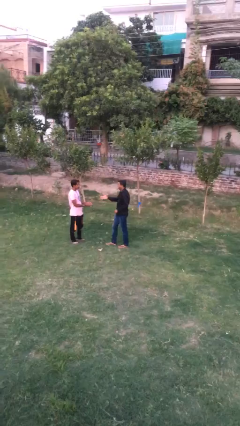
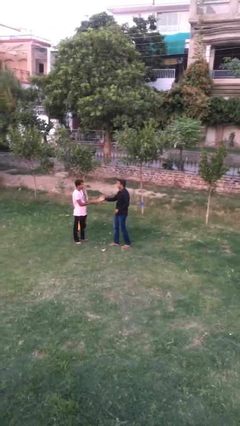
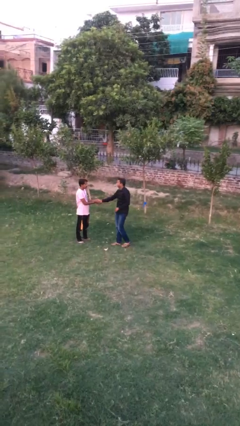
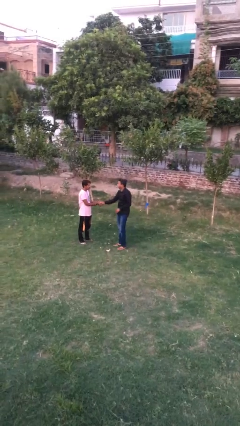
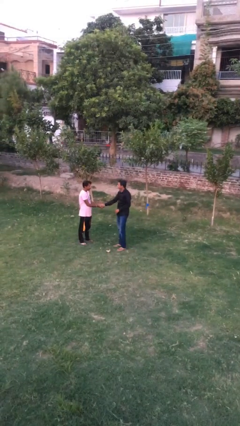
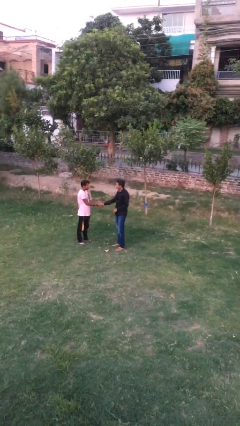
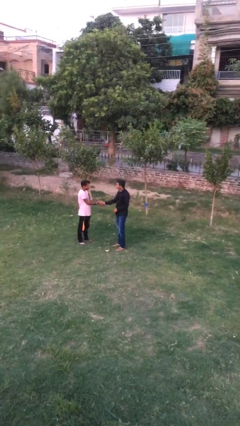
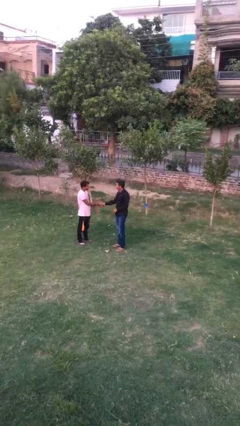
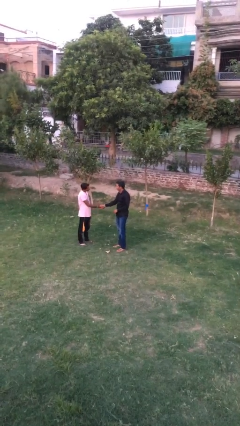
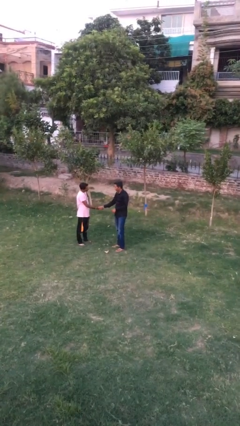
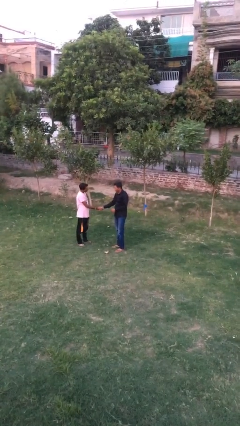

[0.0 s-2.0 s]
person shakes hand

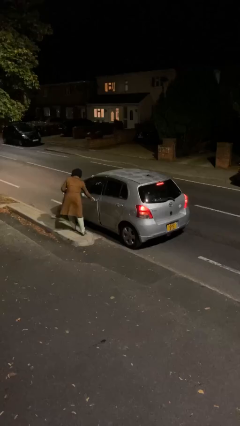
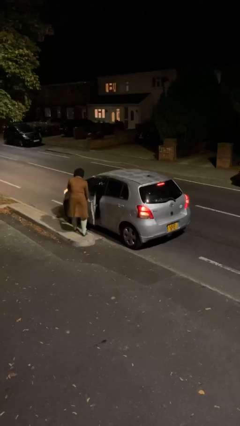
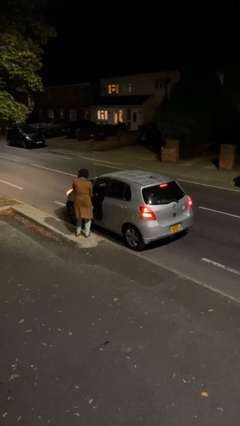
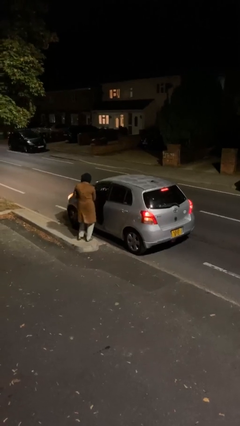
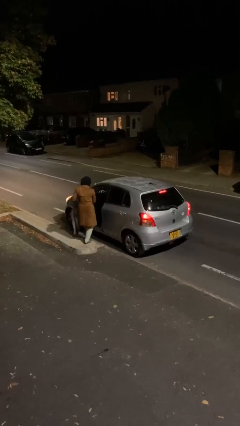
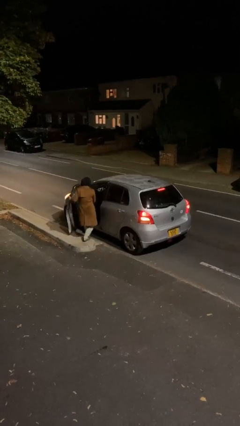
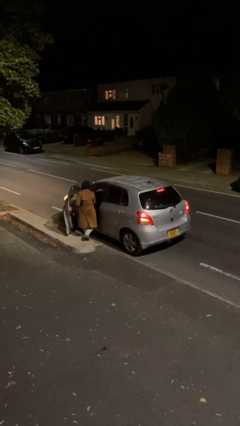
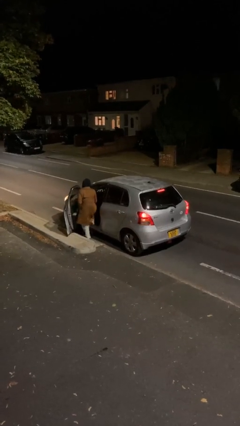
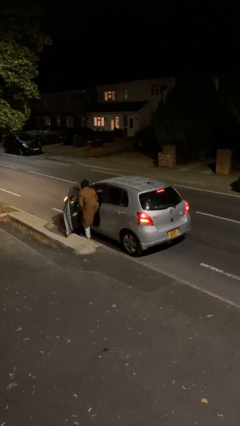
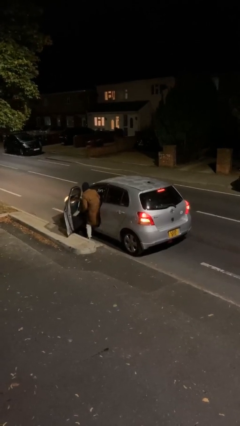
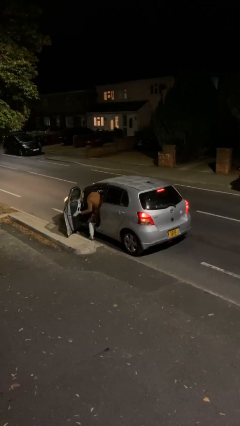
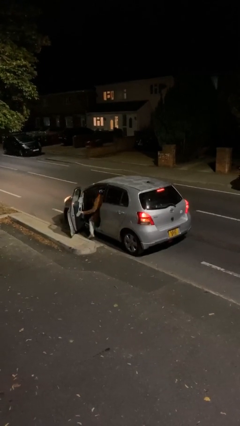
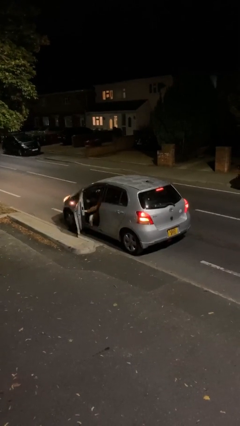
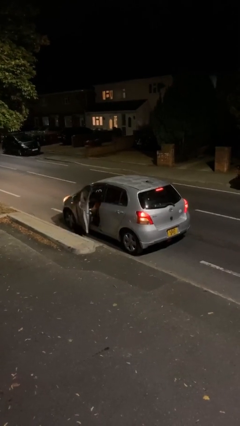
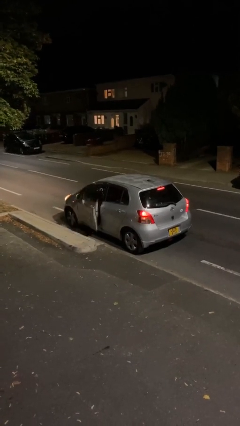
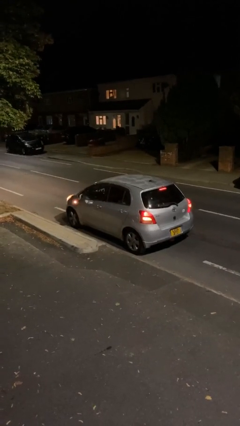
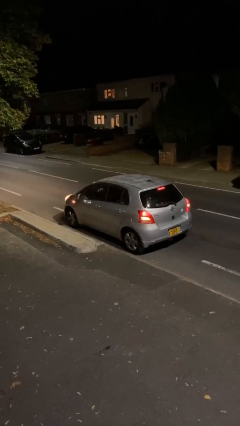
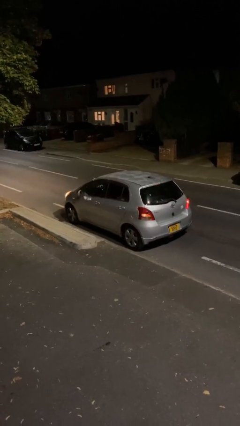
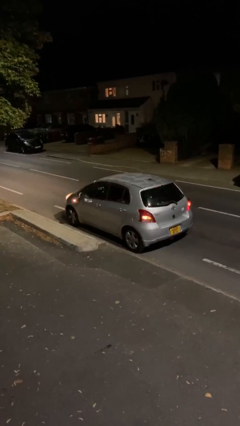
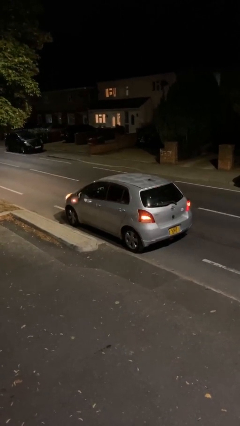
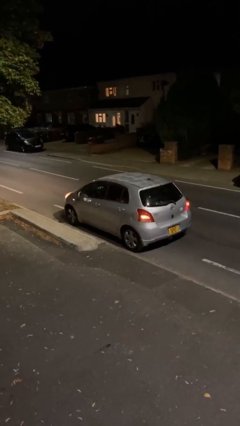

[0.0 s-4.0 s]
car picks up person

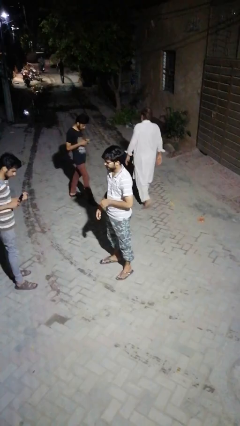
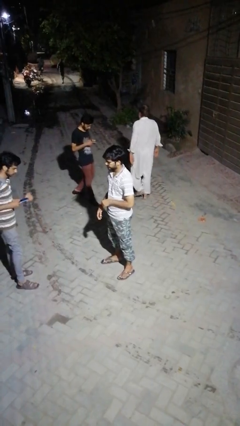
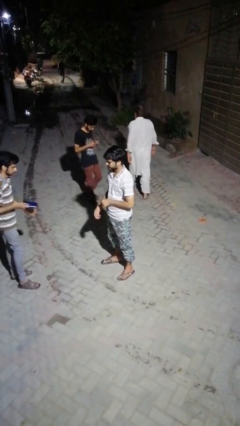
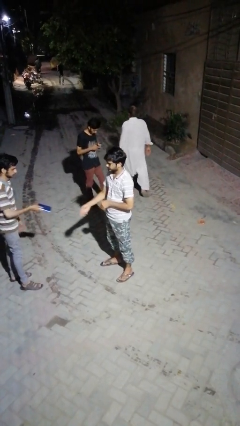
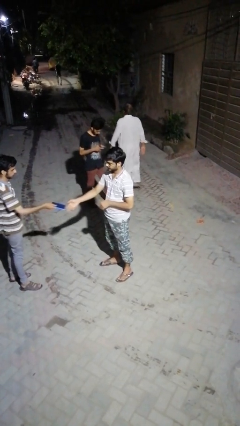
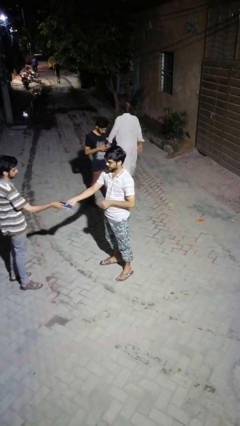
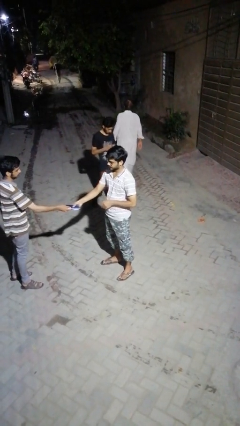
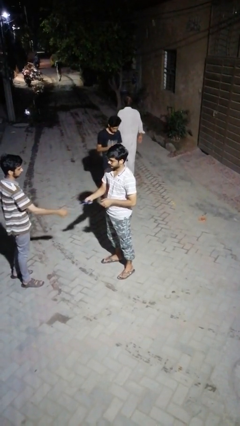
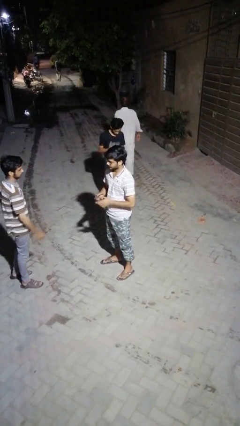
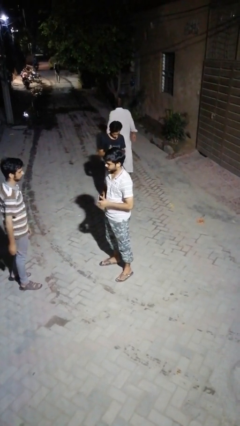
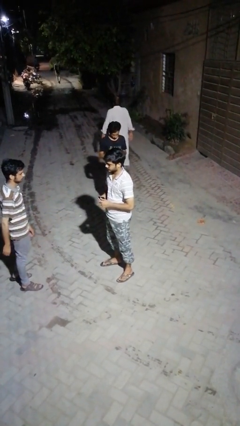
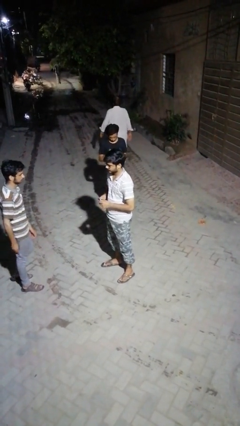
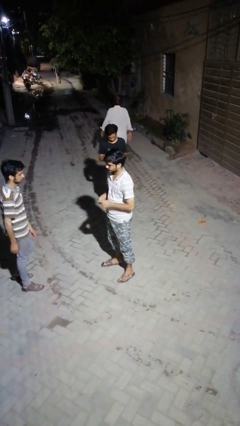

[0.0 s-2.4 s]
person transfers object to person

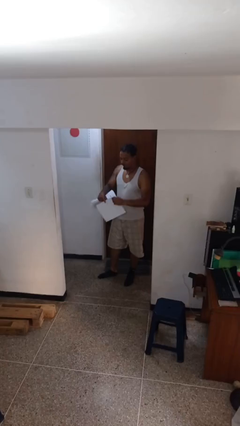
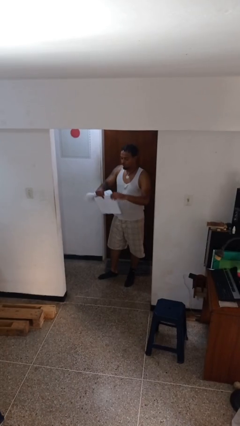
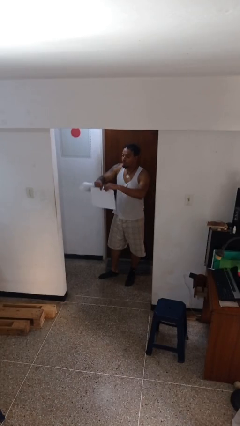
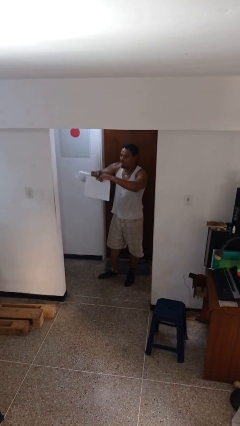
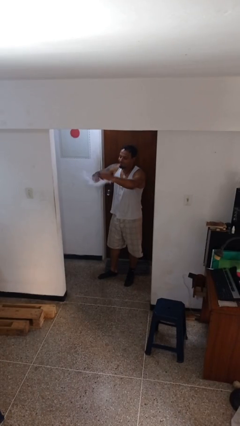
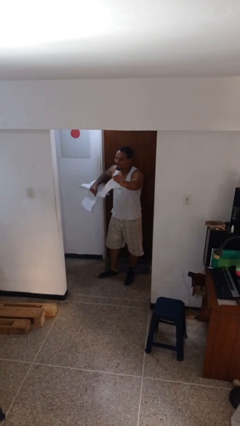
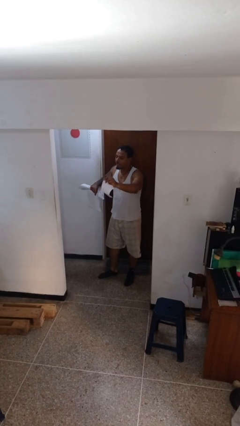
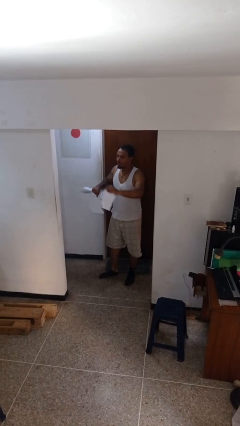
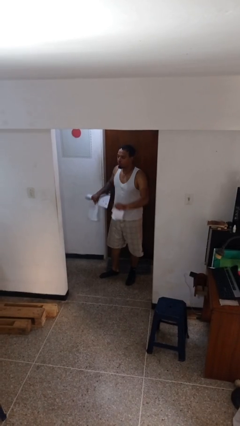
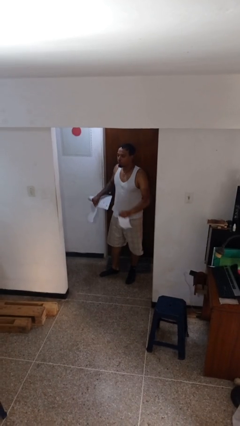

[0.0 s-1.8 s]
person tears paper

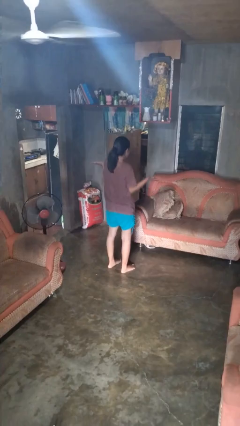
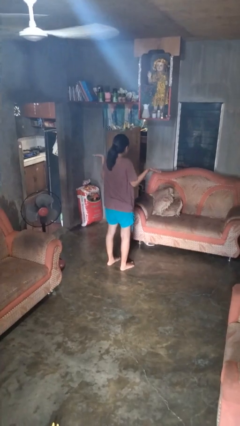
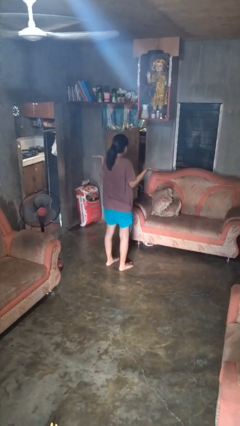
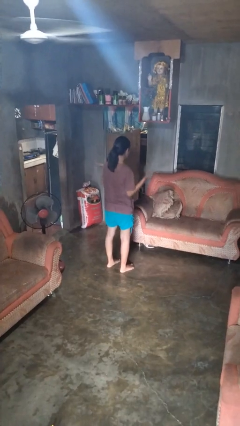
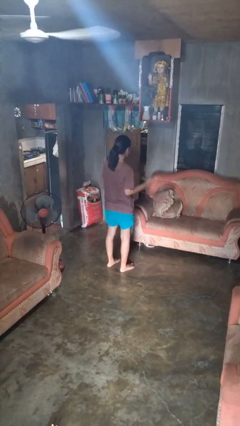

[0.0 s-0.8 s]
person shrugs

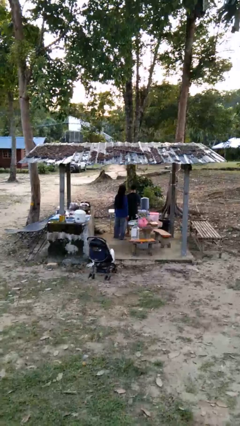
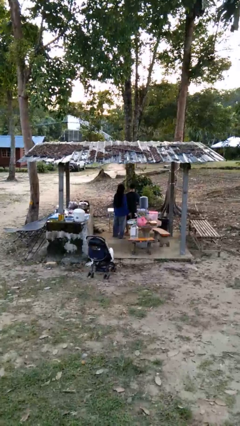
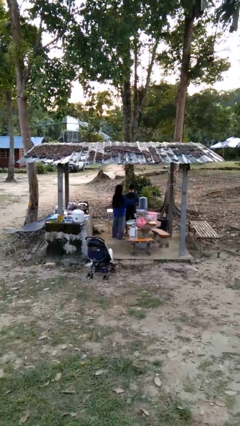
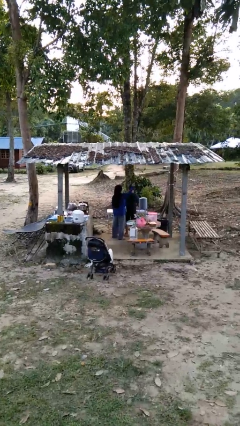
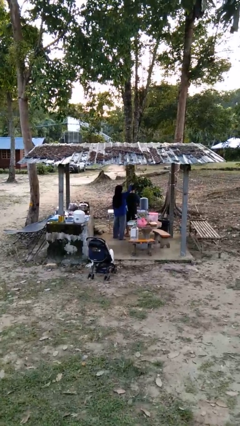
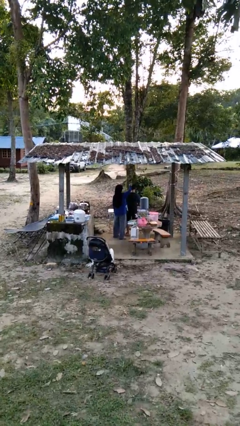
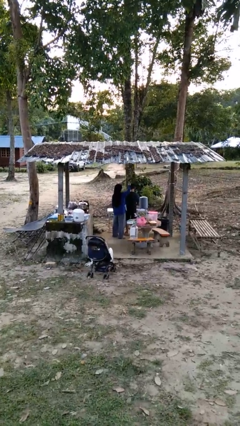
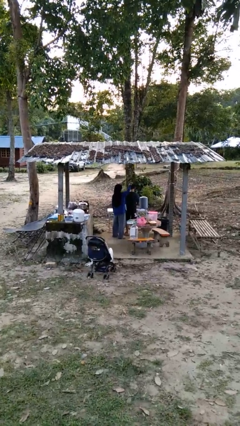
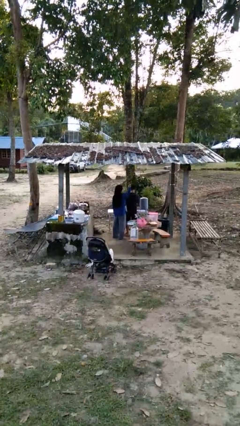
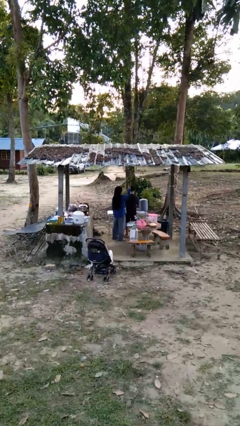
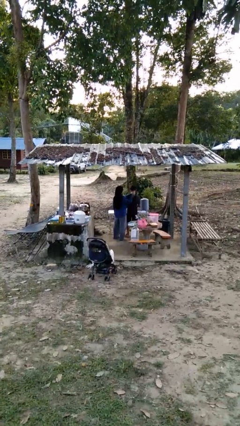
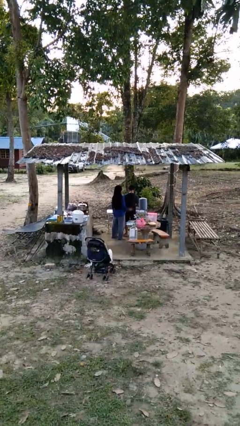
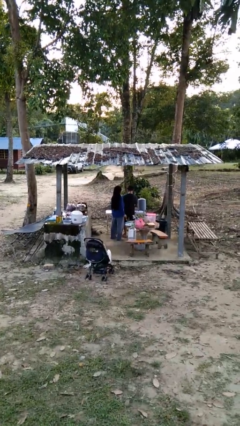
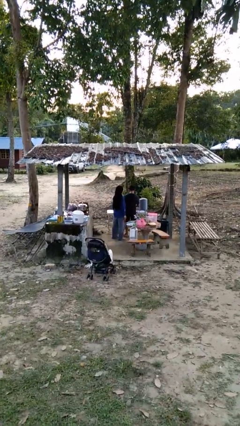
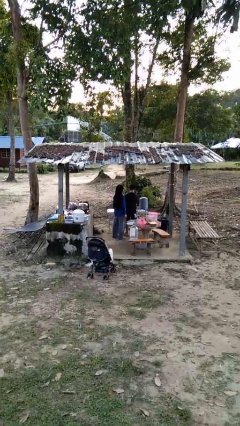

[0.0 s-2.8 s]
person brushes hair of person

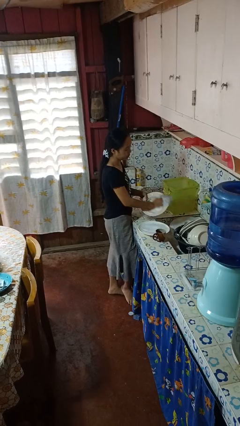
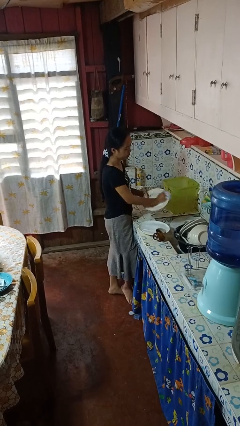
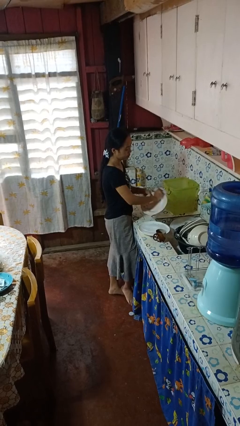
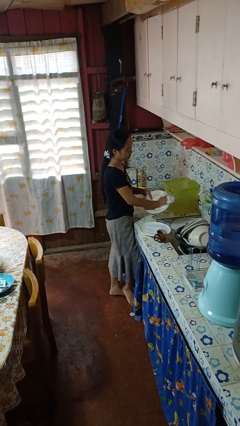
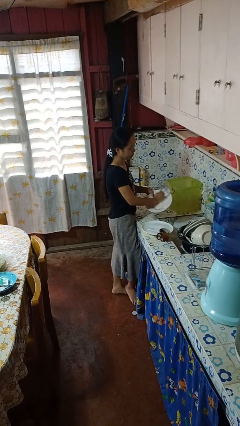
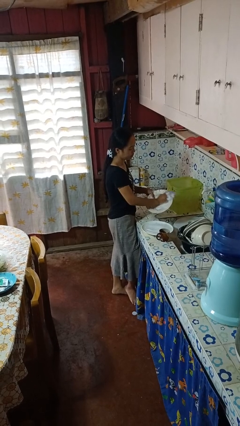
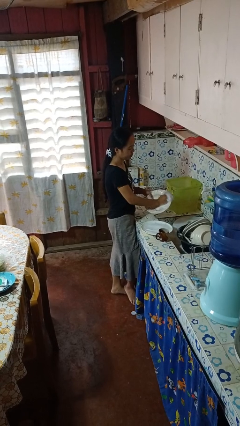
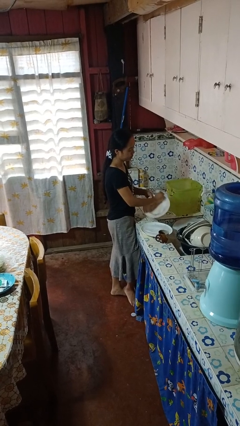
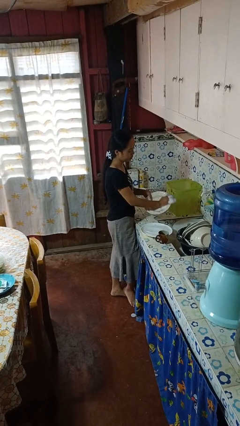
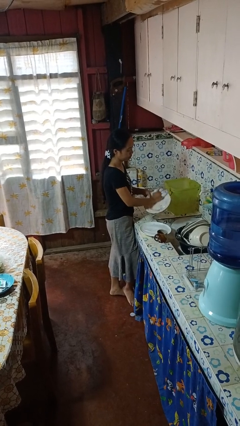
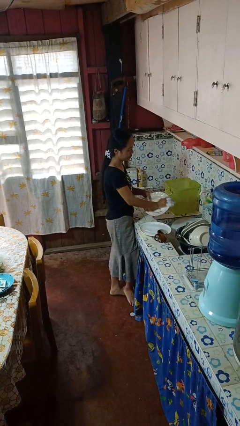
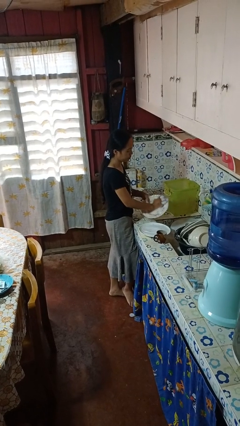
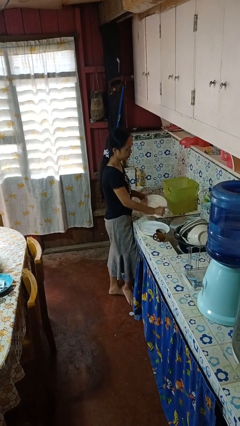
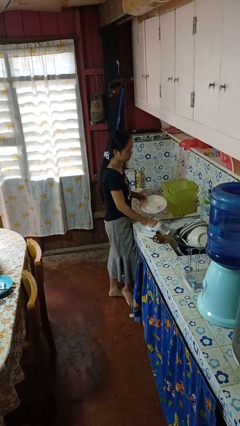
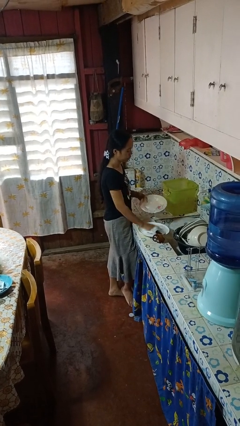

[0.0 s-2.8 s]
person washes dish

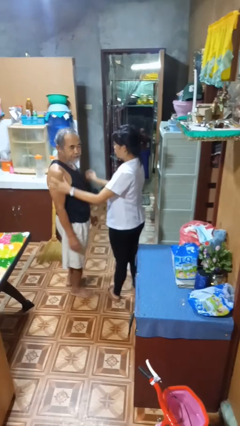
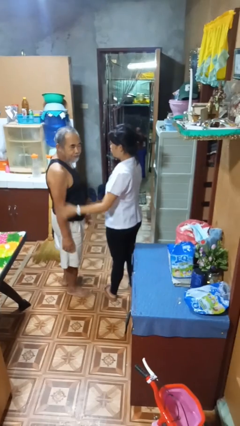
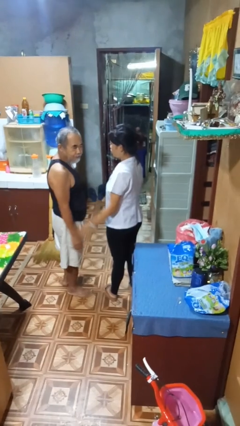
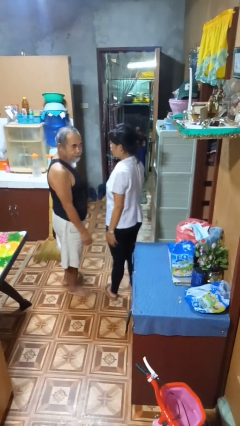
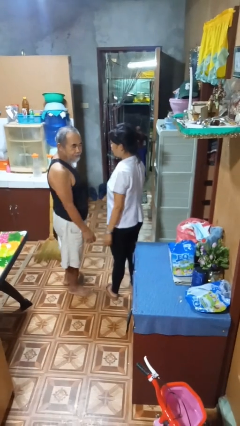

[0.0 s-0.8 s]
person spins person around
